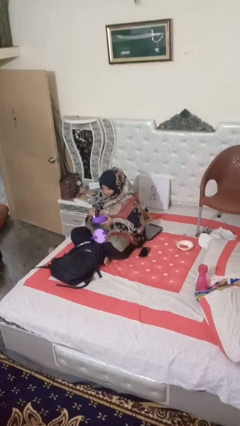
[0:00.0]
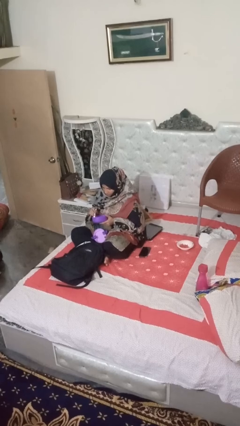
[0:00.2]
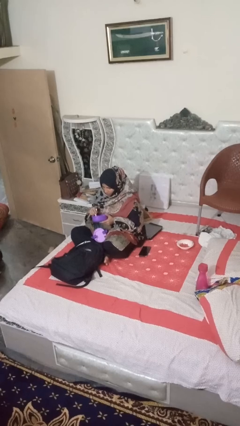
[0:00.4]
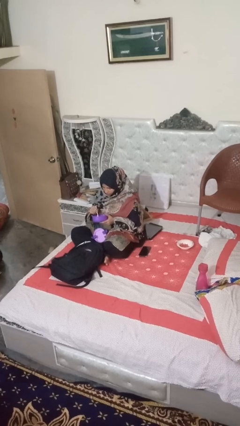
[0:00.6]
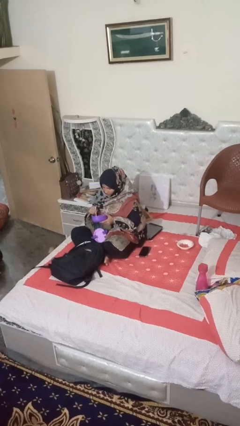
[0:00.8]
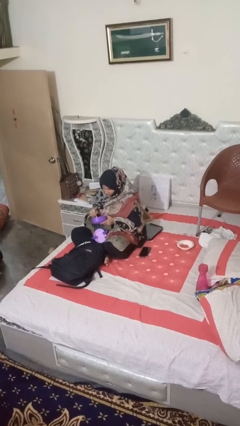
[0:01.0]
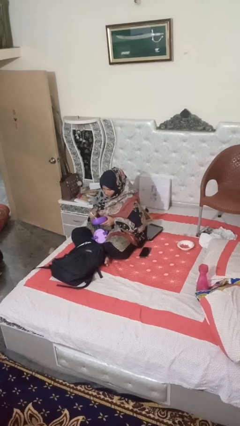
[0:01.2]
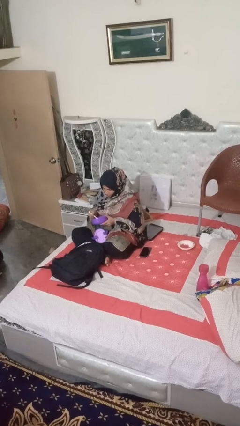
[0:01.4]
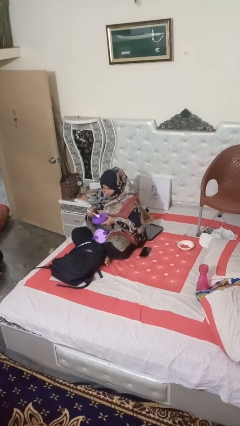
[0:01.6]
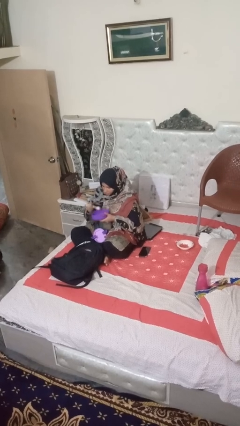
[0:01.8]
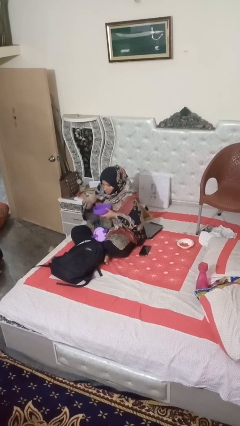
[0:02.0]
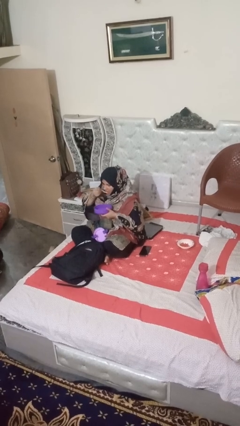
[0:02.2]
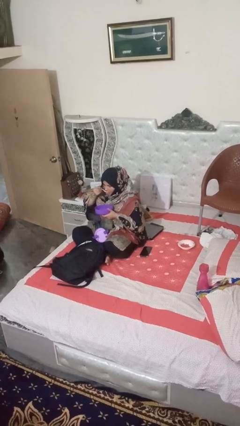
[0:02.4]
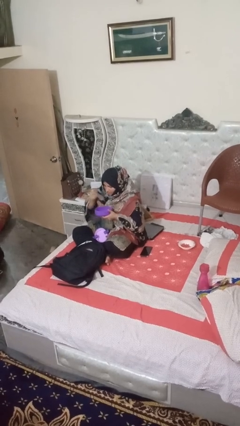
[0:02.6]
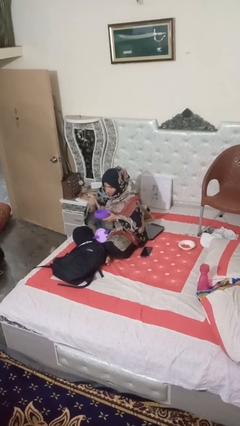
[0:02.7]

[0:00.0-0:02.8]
person eats snack from bag

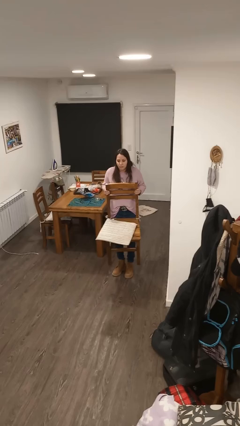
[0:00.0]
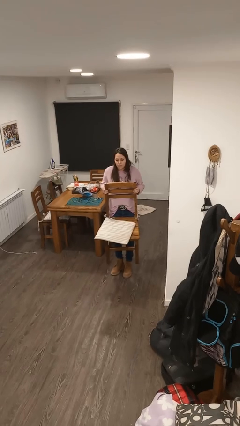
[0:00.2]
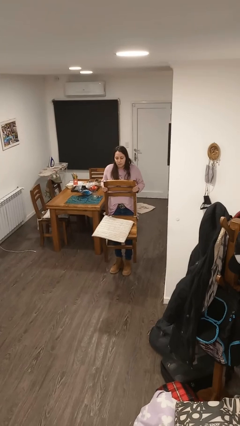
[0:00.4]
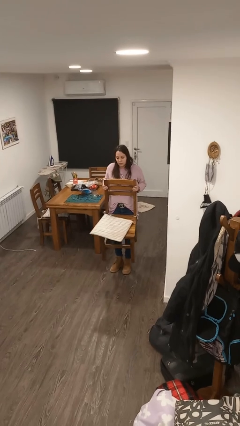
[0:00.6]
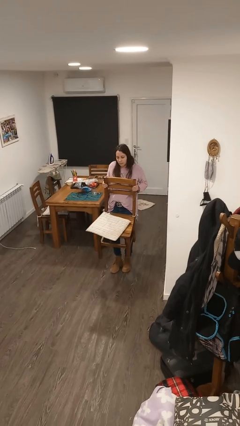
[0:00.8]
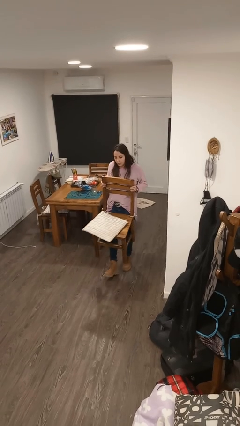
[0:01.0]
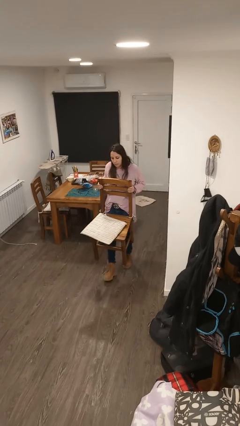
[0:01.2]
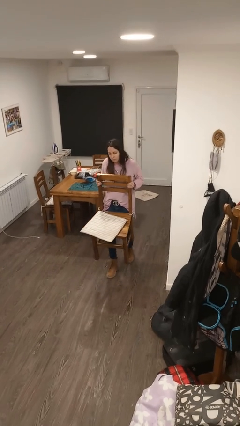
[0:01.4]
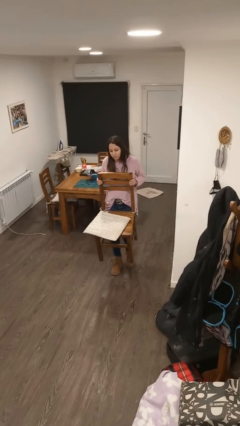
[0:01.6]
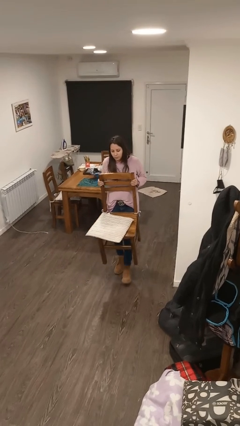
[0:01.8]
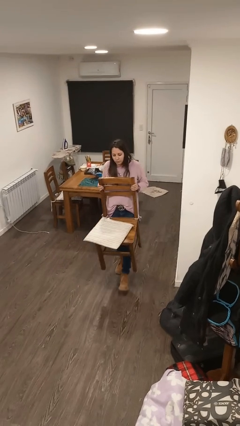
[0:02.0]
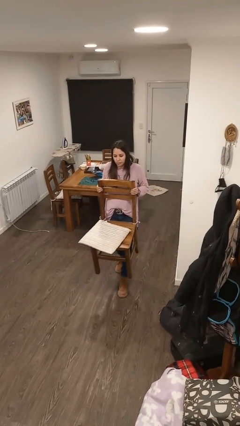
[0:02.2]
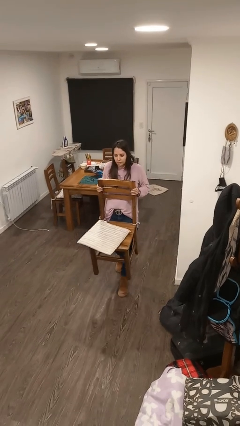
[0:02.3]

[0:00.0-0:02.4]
person carries furniture

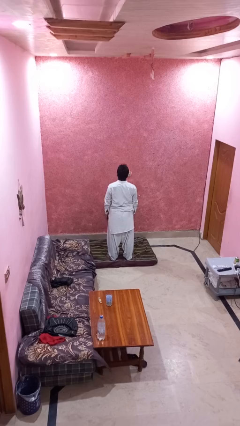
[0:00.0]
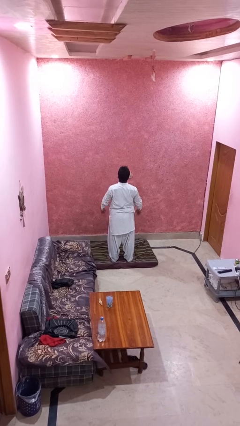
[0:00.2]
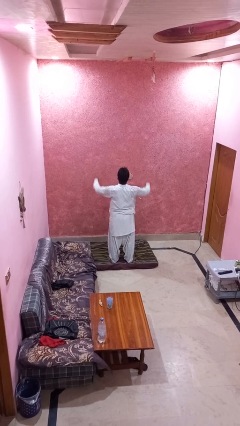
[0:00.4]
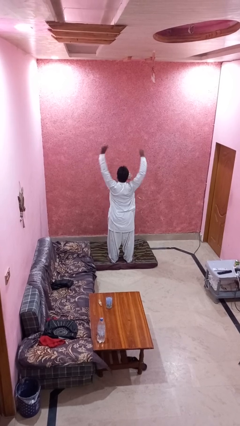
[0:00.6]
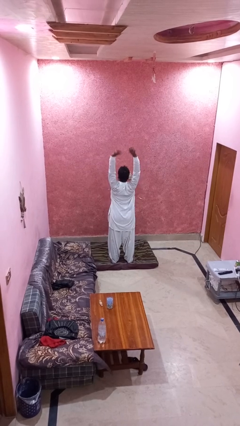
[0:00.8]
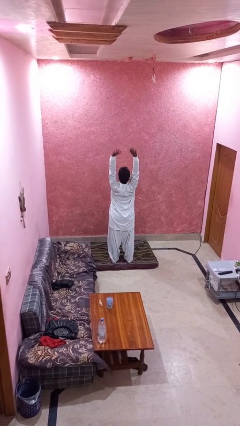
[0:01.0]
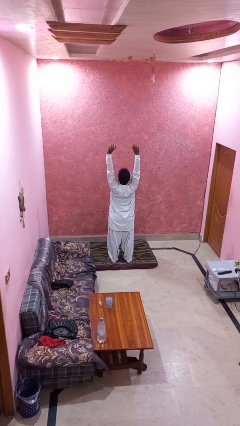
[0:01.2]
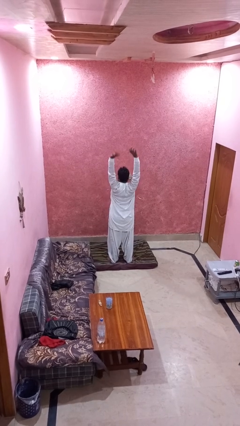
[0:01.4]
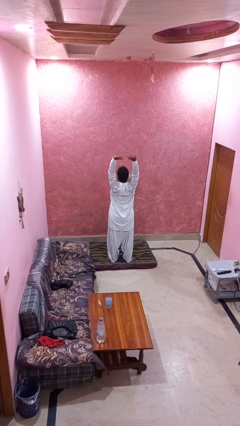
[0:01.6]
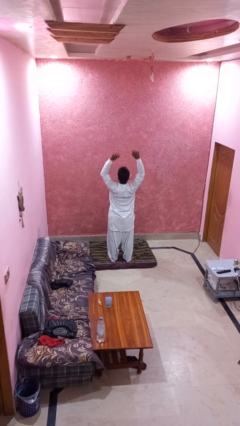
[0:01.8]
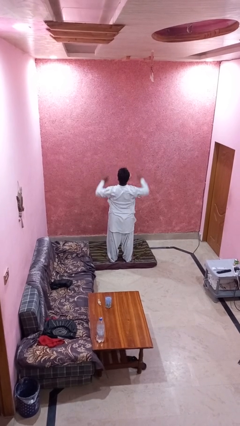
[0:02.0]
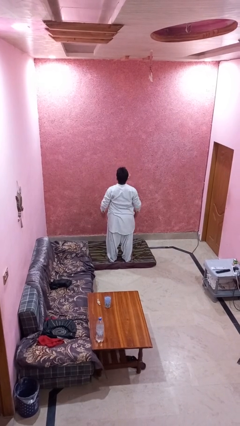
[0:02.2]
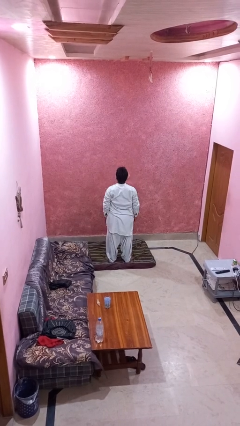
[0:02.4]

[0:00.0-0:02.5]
person stretches arms over head

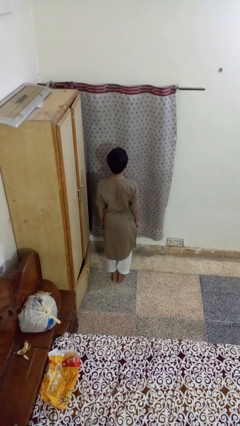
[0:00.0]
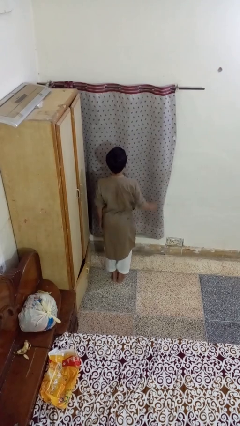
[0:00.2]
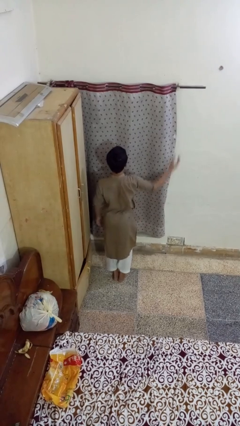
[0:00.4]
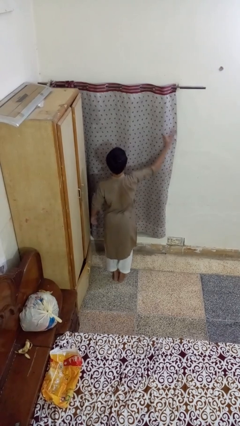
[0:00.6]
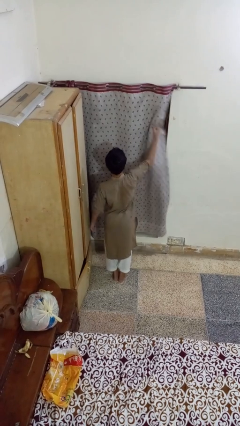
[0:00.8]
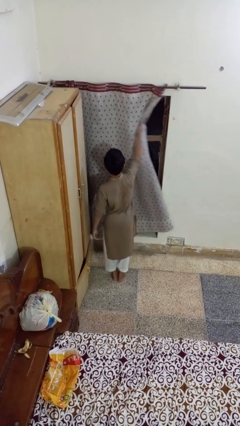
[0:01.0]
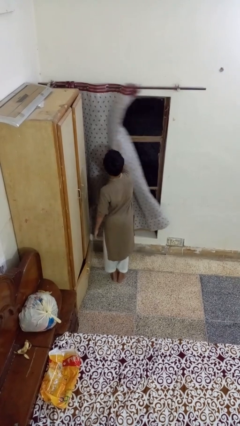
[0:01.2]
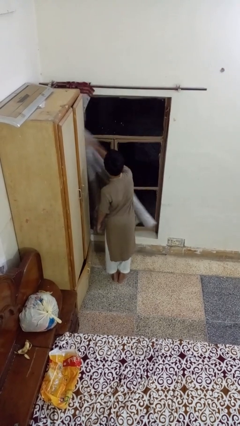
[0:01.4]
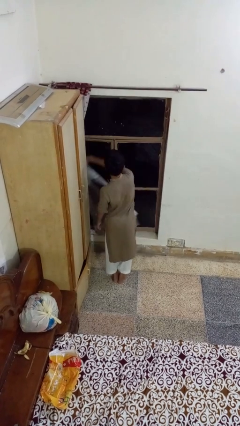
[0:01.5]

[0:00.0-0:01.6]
person opens curtains

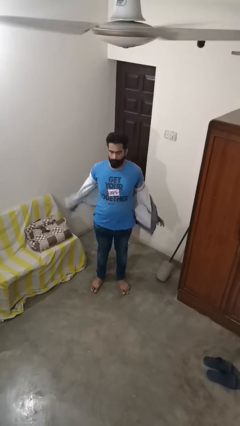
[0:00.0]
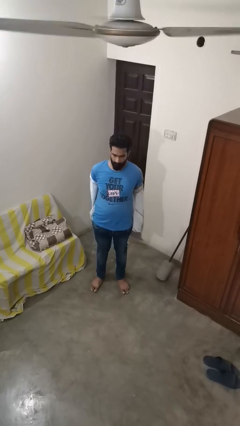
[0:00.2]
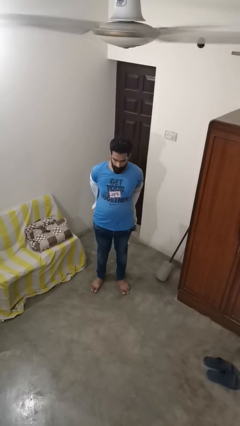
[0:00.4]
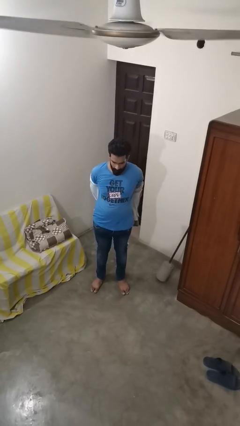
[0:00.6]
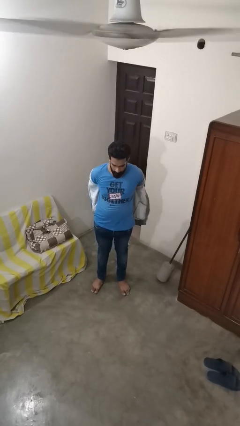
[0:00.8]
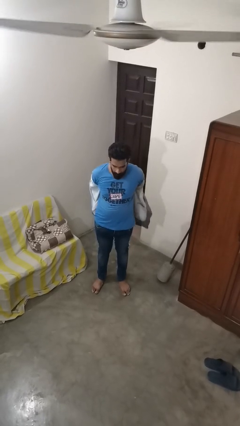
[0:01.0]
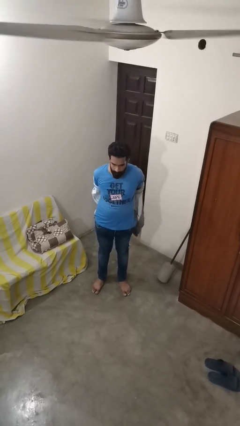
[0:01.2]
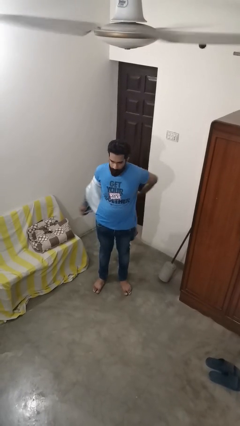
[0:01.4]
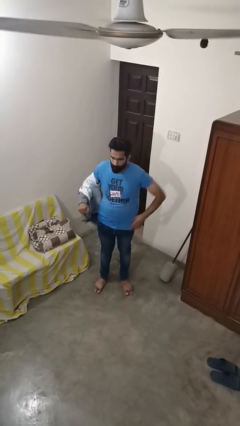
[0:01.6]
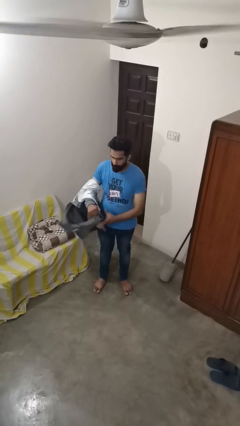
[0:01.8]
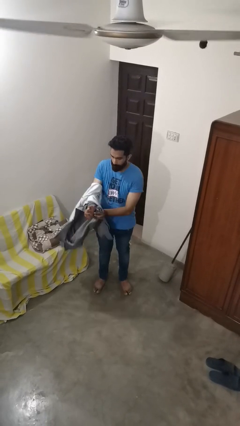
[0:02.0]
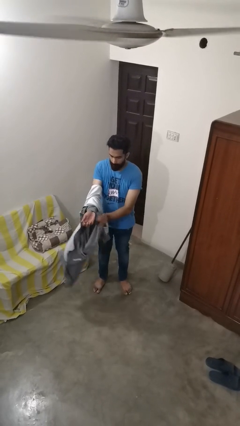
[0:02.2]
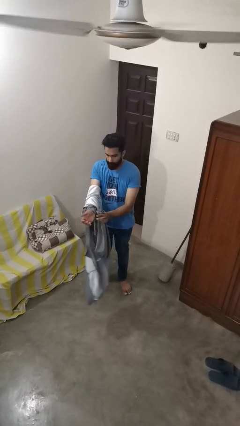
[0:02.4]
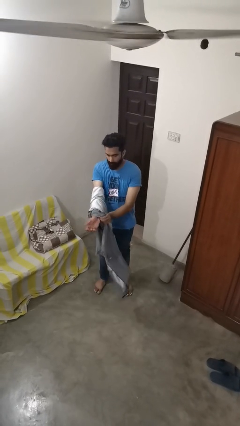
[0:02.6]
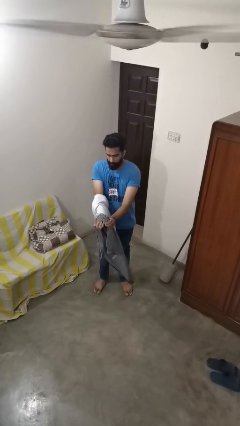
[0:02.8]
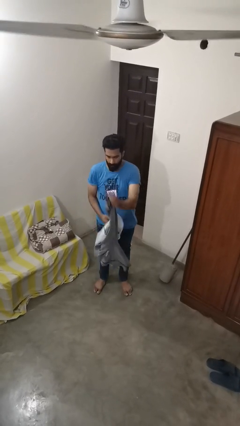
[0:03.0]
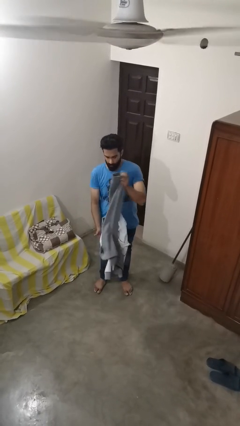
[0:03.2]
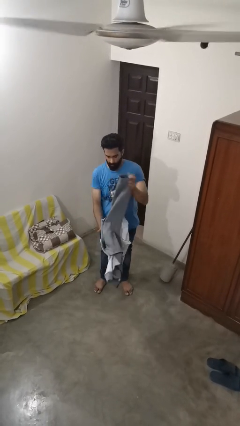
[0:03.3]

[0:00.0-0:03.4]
person takes off jacket

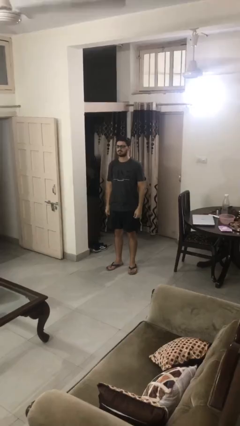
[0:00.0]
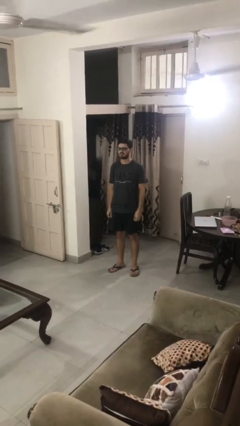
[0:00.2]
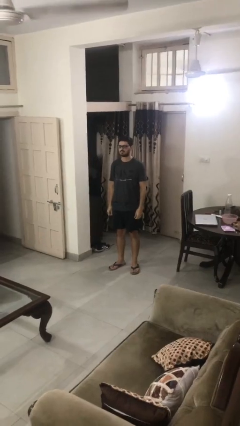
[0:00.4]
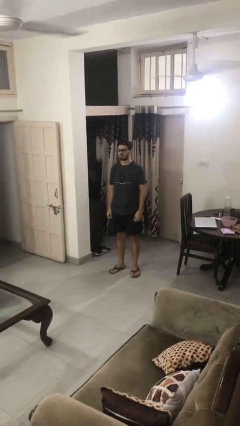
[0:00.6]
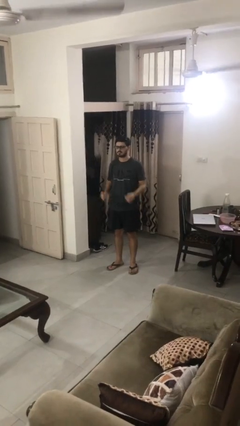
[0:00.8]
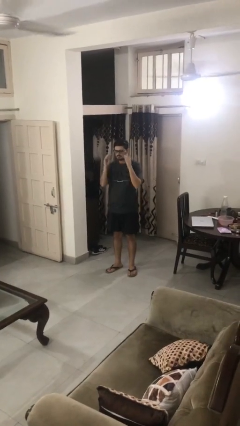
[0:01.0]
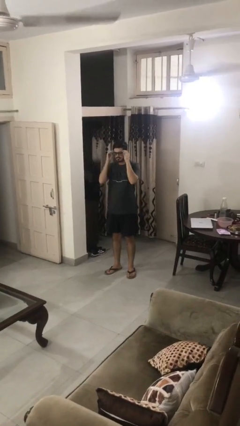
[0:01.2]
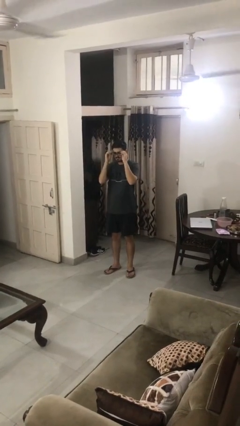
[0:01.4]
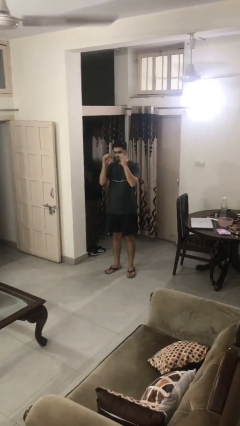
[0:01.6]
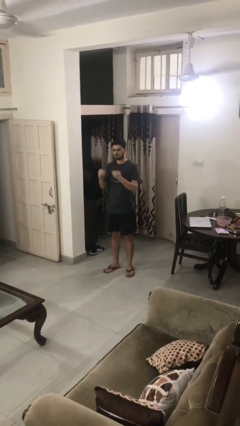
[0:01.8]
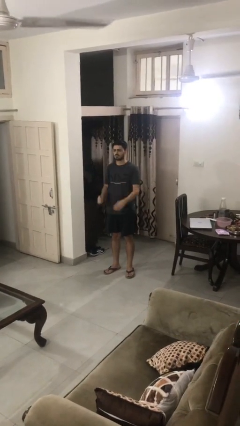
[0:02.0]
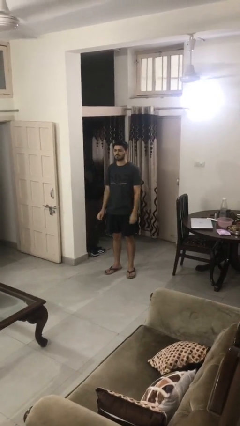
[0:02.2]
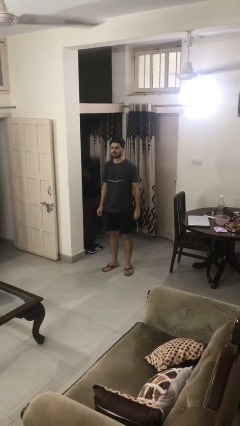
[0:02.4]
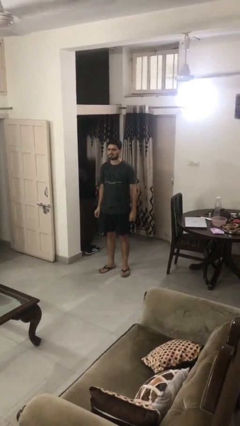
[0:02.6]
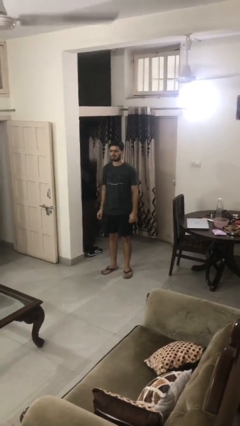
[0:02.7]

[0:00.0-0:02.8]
person takes off glasses

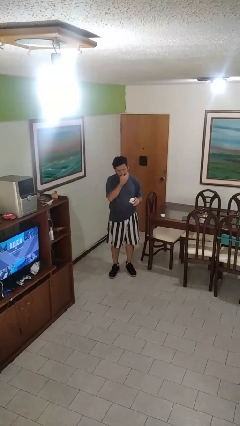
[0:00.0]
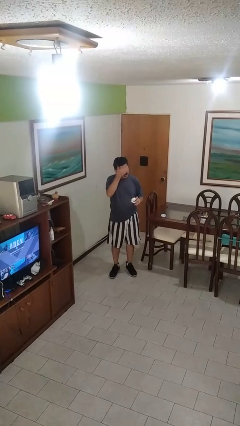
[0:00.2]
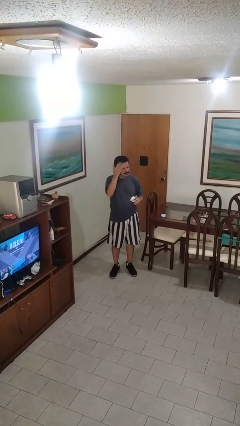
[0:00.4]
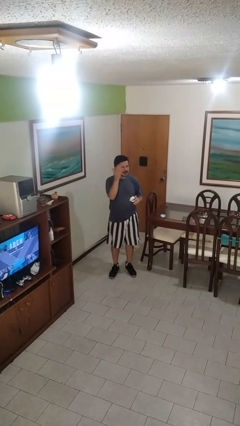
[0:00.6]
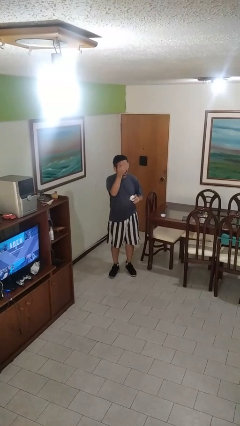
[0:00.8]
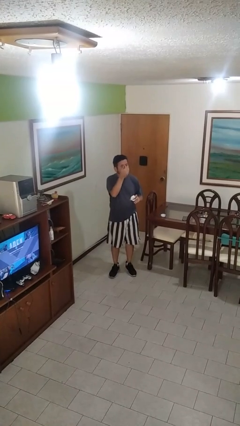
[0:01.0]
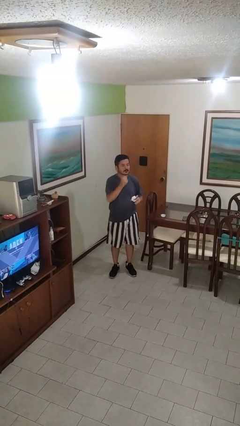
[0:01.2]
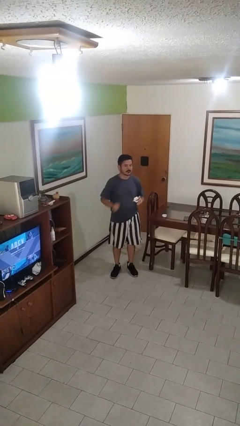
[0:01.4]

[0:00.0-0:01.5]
person applies facial moisturizer
